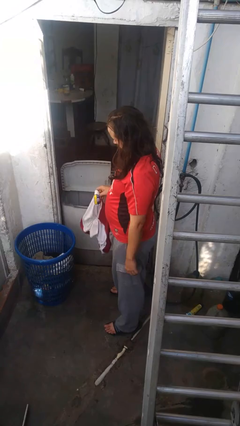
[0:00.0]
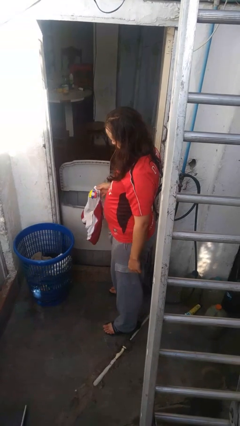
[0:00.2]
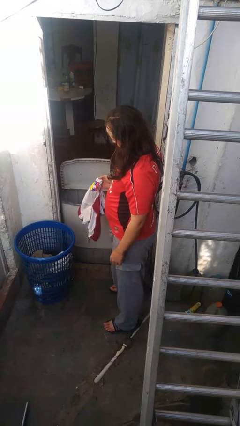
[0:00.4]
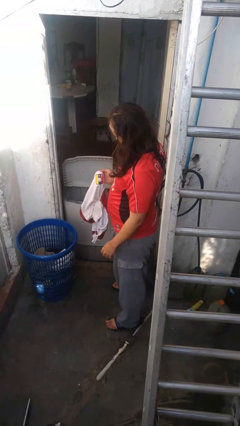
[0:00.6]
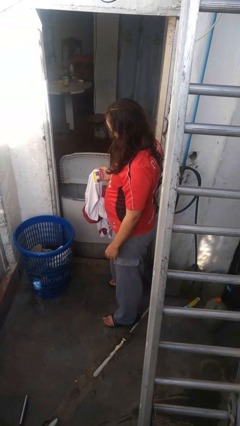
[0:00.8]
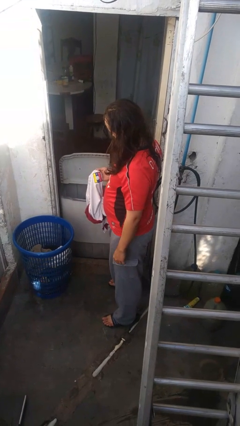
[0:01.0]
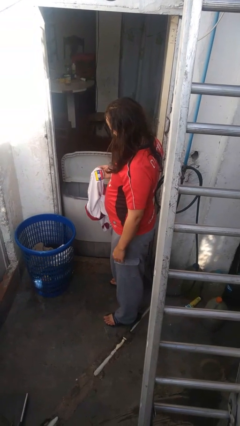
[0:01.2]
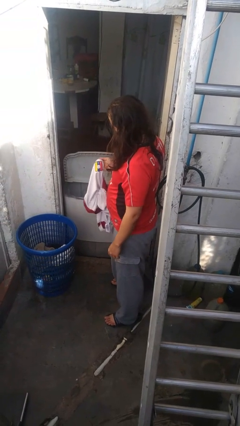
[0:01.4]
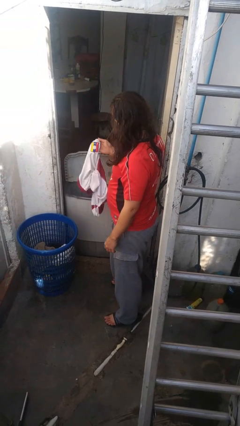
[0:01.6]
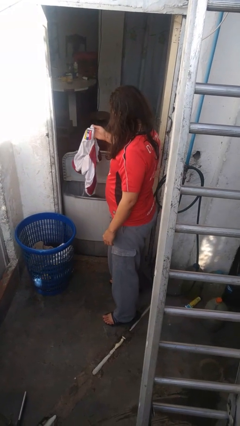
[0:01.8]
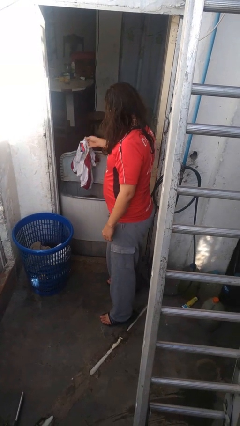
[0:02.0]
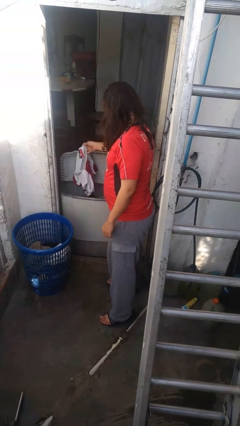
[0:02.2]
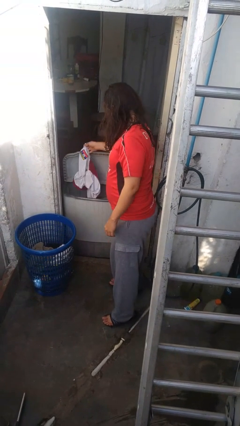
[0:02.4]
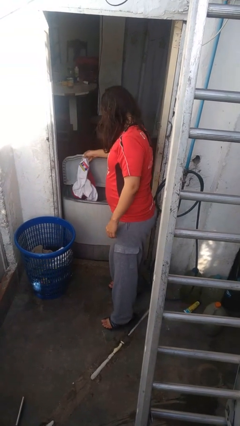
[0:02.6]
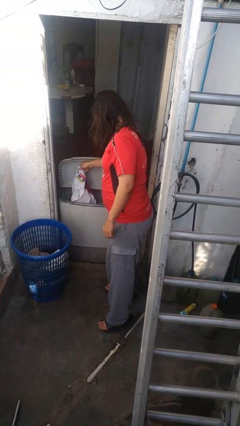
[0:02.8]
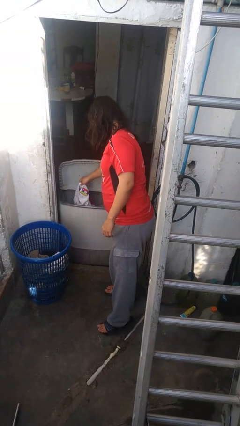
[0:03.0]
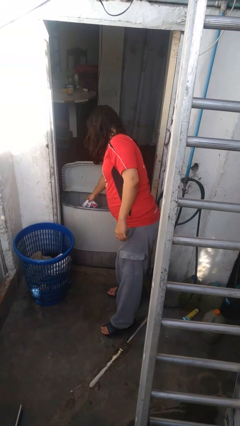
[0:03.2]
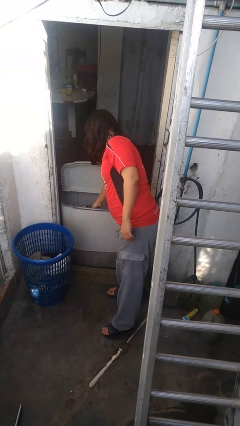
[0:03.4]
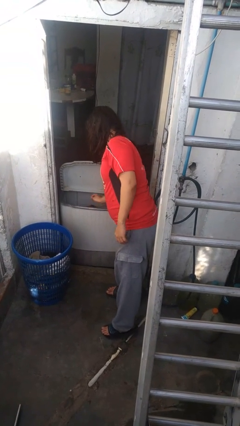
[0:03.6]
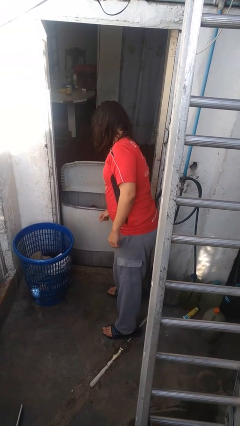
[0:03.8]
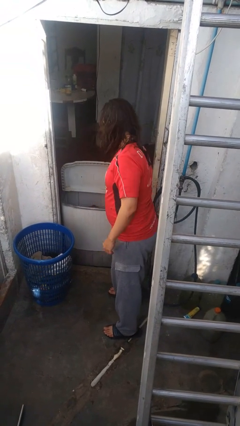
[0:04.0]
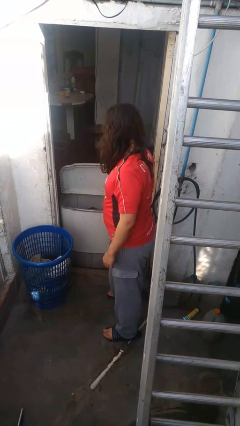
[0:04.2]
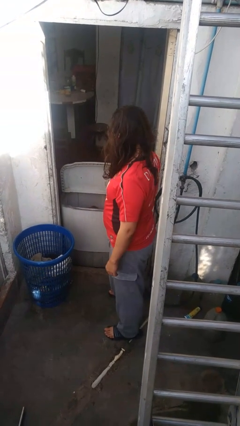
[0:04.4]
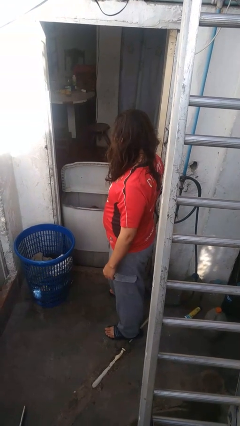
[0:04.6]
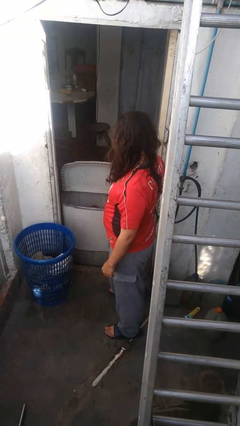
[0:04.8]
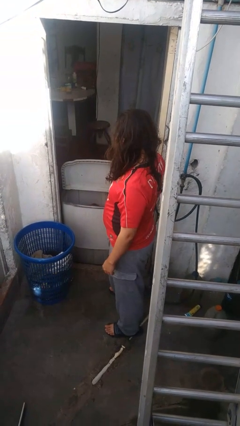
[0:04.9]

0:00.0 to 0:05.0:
person loads clotheswasher

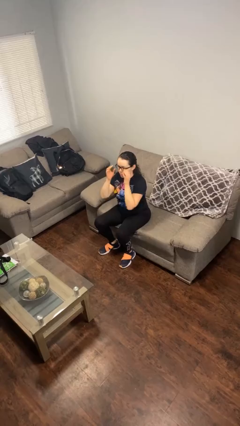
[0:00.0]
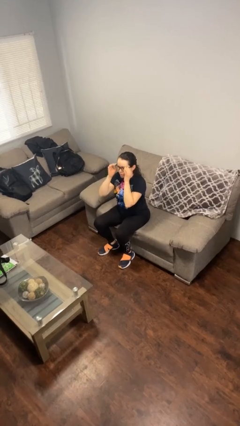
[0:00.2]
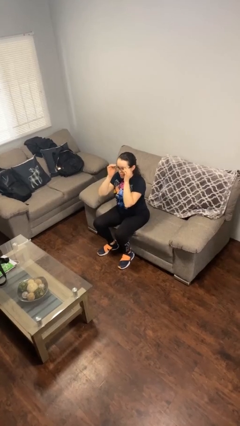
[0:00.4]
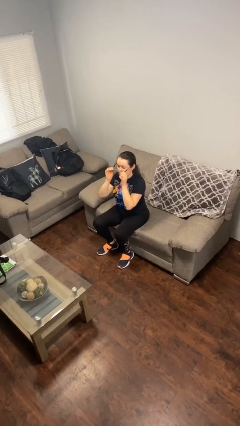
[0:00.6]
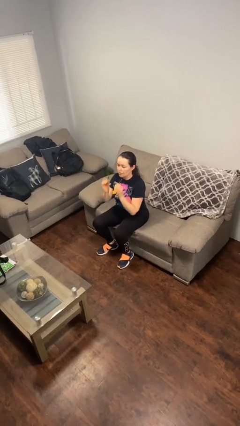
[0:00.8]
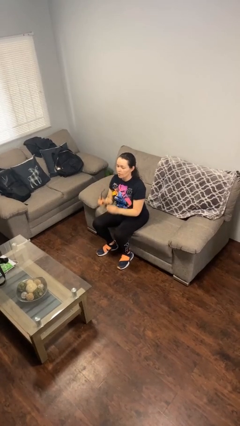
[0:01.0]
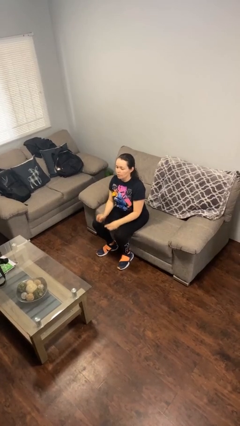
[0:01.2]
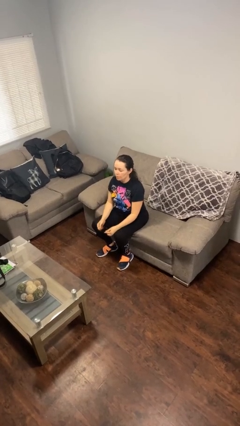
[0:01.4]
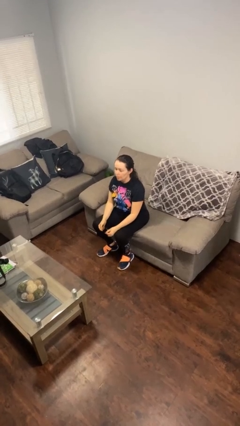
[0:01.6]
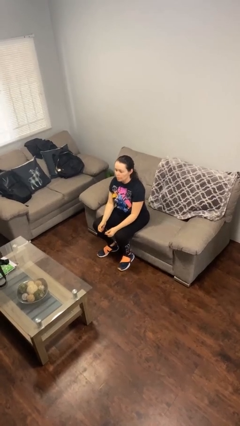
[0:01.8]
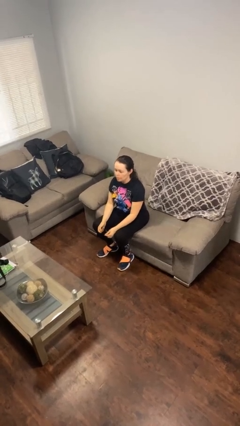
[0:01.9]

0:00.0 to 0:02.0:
person takes off glasses

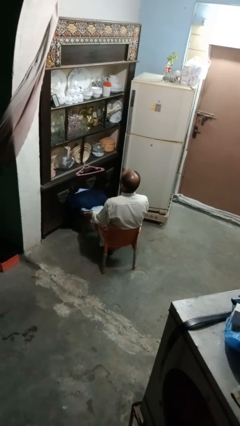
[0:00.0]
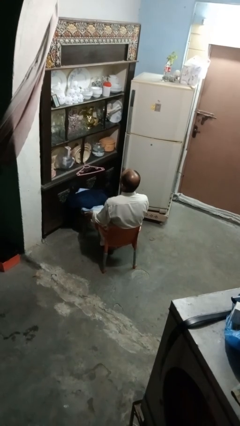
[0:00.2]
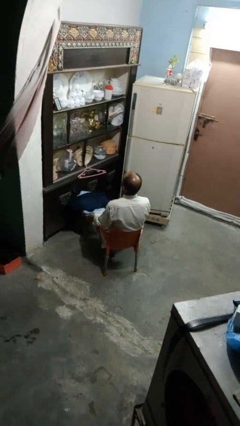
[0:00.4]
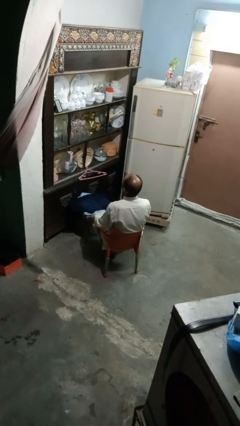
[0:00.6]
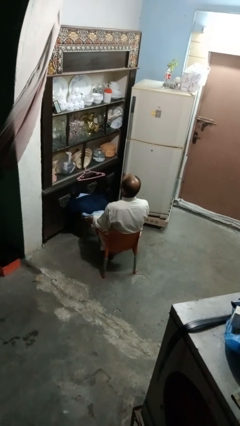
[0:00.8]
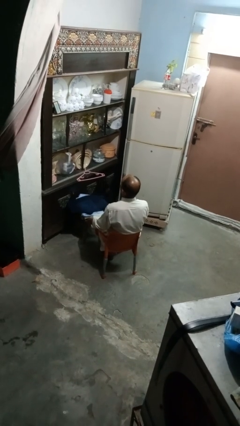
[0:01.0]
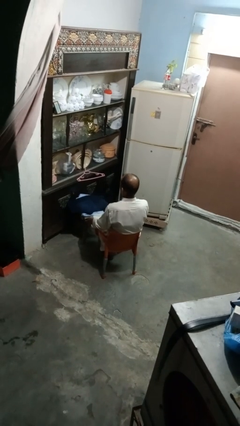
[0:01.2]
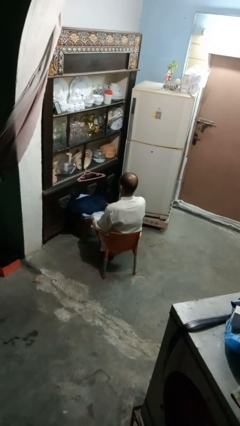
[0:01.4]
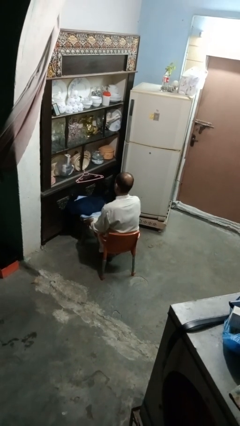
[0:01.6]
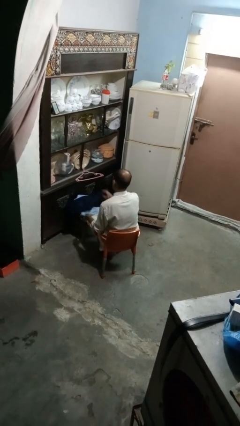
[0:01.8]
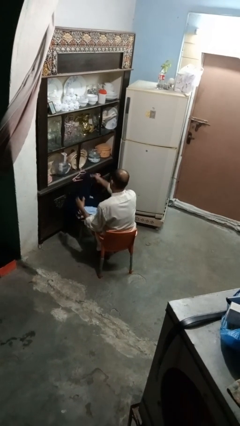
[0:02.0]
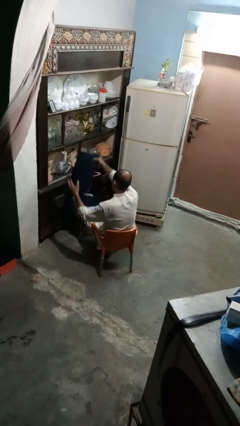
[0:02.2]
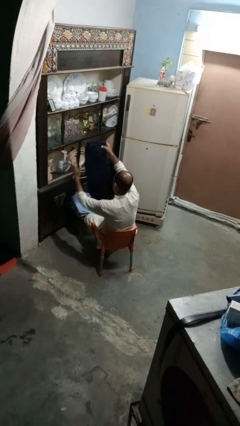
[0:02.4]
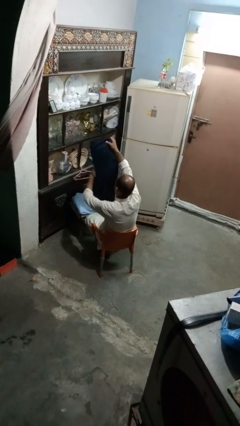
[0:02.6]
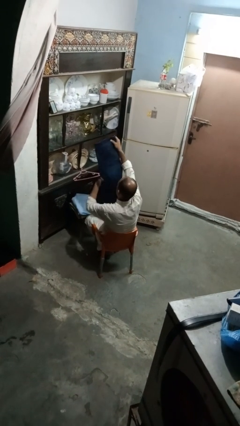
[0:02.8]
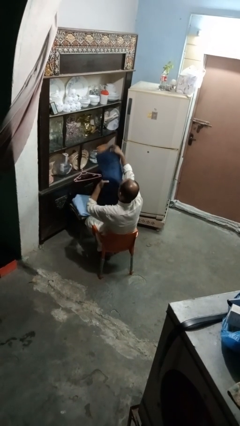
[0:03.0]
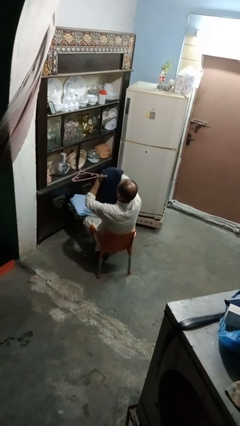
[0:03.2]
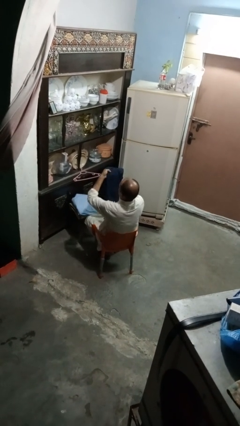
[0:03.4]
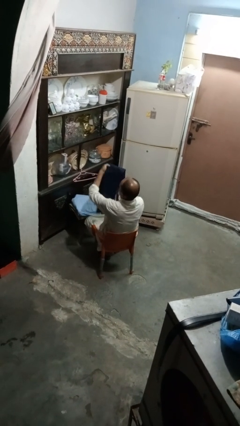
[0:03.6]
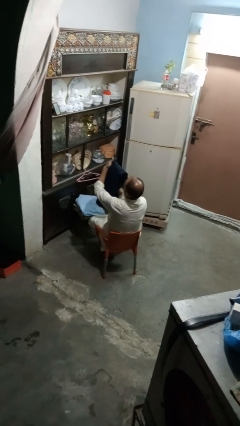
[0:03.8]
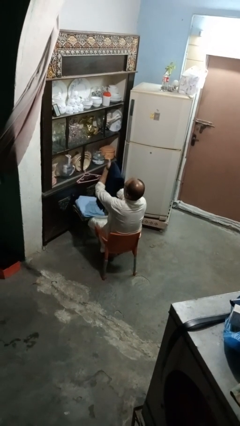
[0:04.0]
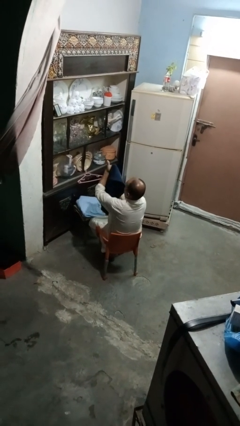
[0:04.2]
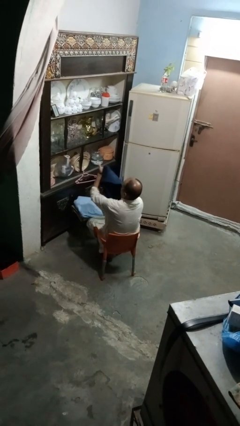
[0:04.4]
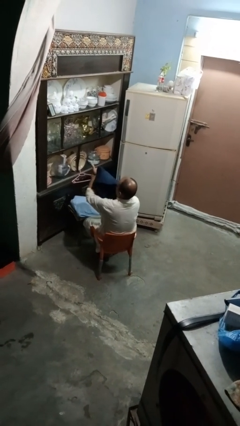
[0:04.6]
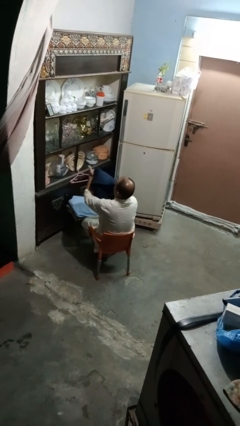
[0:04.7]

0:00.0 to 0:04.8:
person folds pants

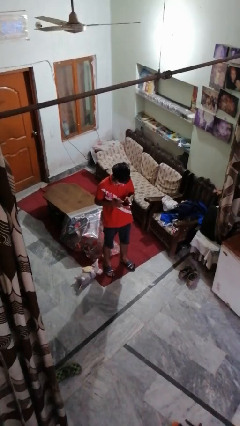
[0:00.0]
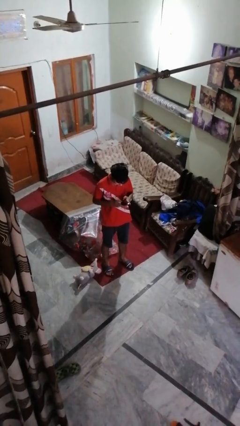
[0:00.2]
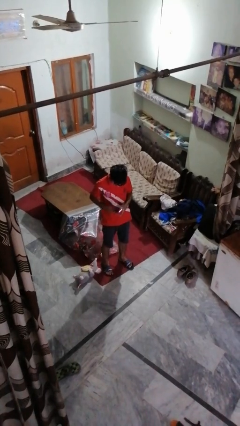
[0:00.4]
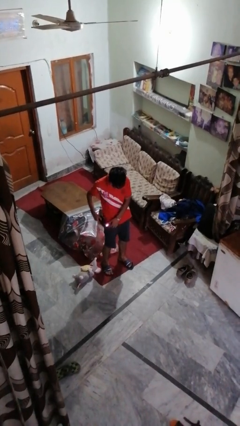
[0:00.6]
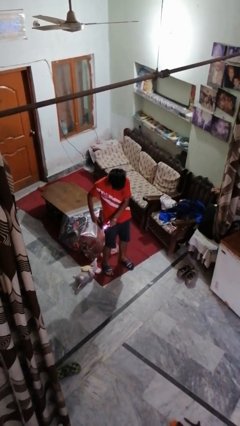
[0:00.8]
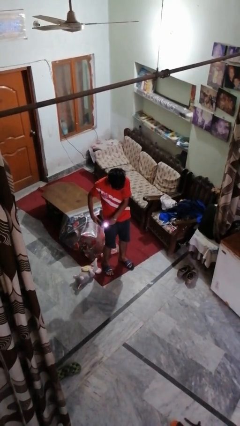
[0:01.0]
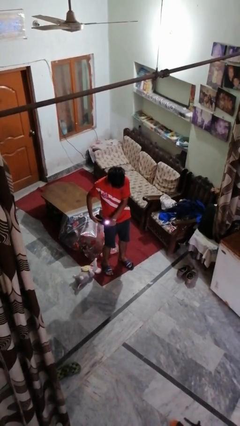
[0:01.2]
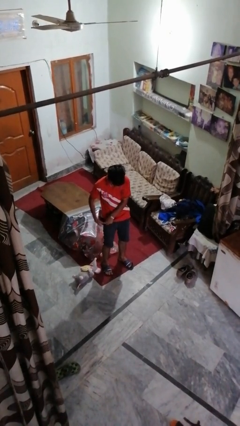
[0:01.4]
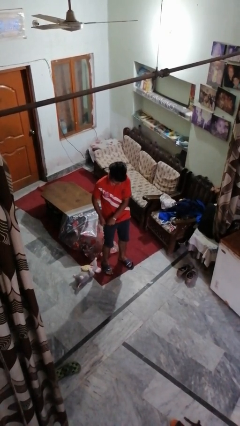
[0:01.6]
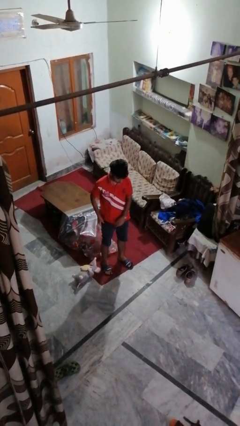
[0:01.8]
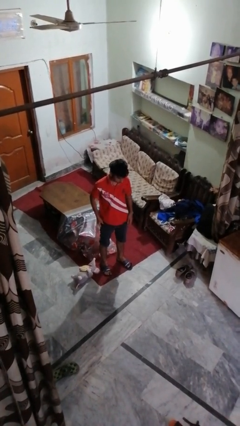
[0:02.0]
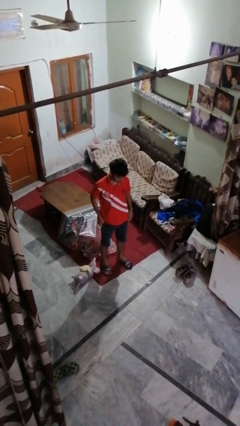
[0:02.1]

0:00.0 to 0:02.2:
person puts phone into pocket

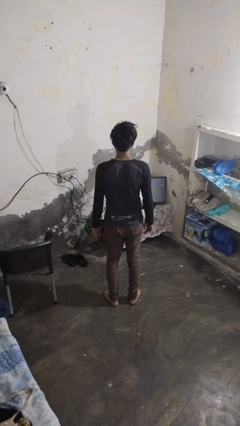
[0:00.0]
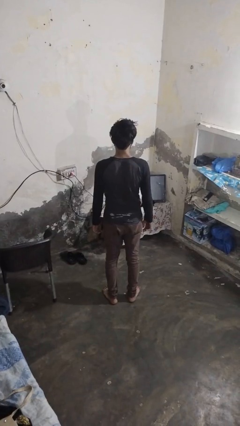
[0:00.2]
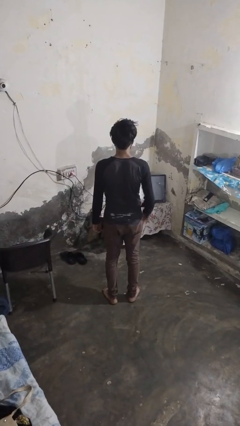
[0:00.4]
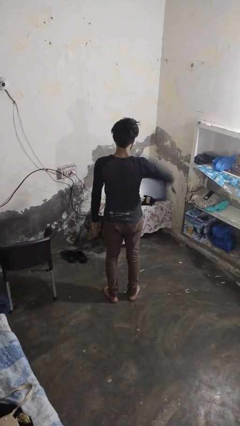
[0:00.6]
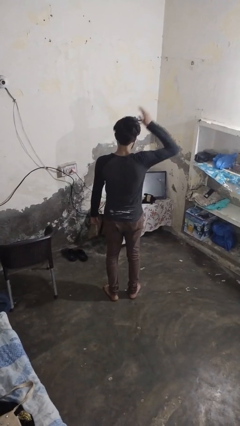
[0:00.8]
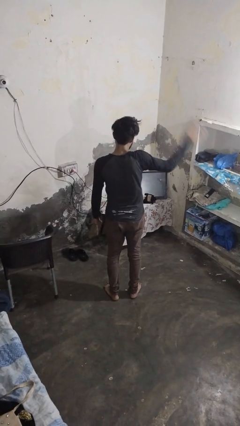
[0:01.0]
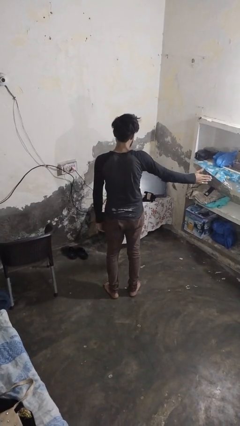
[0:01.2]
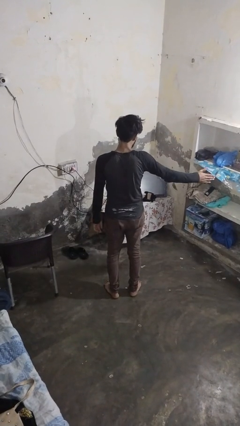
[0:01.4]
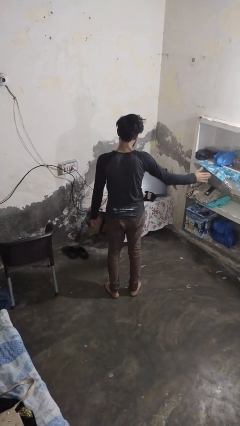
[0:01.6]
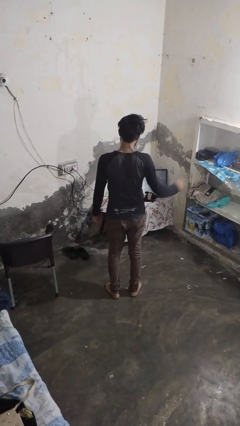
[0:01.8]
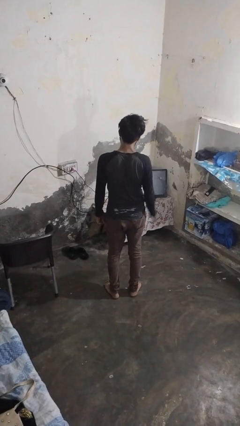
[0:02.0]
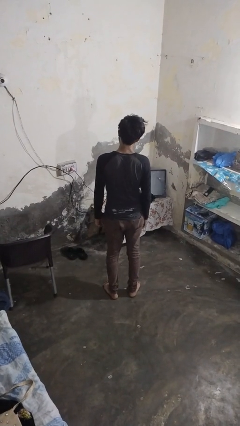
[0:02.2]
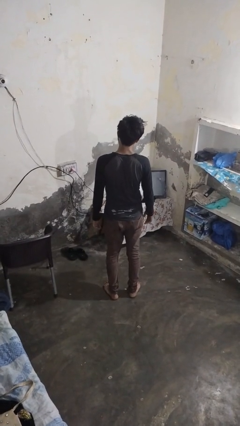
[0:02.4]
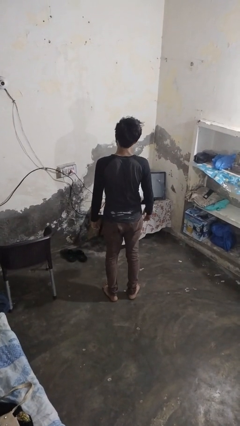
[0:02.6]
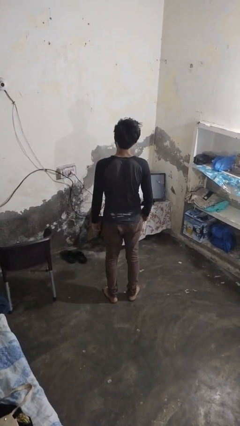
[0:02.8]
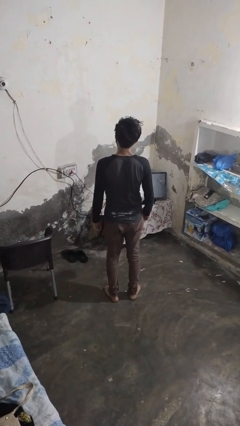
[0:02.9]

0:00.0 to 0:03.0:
person karate chop

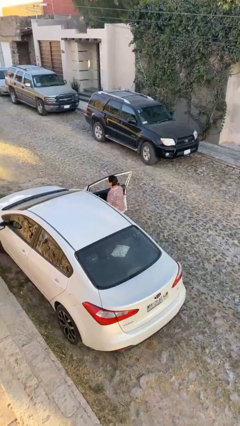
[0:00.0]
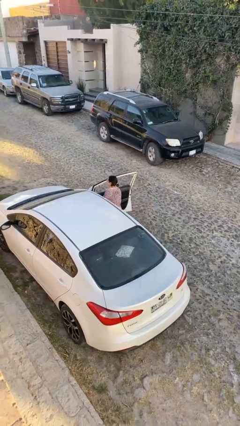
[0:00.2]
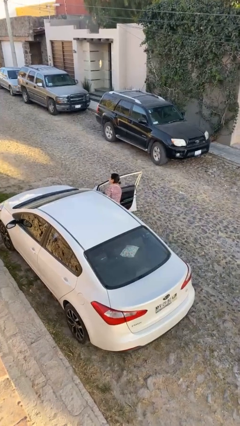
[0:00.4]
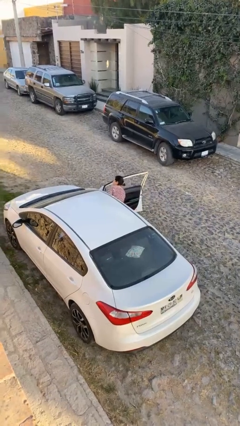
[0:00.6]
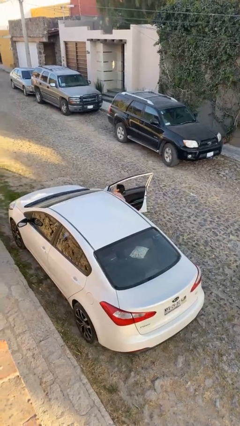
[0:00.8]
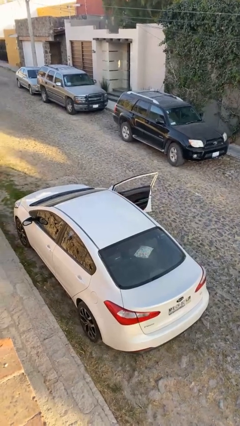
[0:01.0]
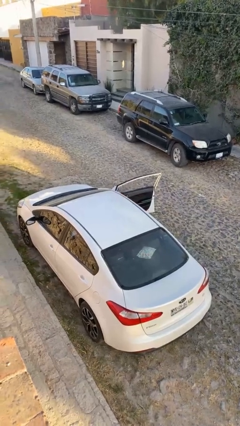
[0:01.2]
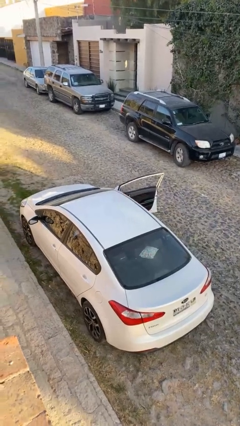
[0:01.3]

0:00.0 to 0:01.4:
person enters car
